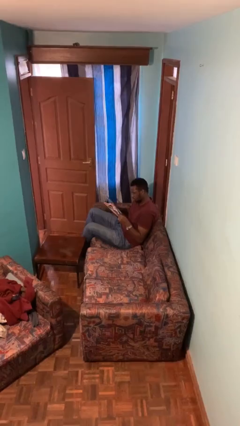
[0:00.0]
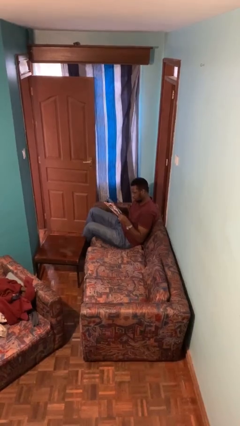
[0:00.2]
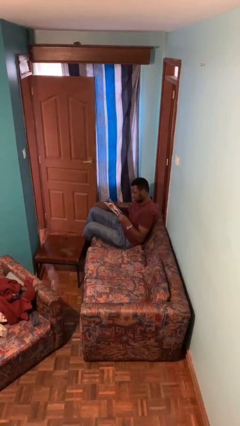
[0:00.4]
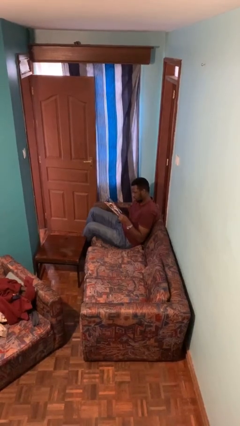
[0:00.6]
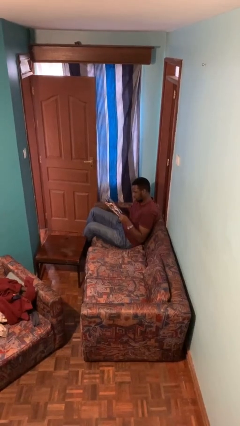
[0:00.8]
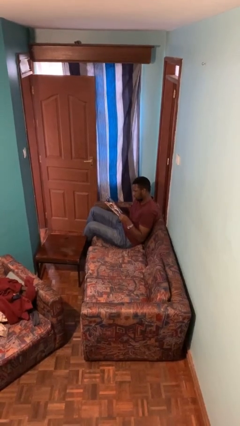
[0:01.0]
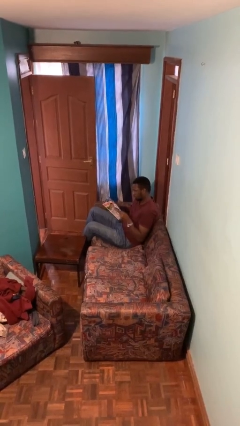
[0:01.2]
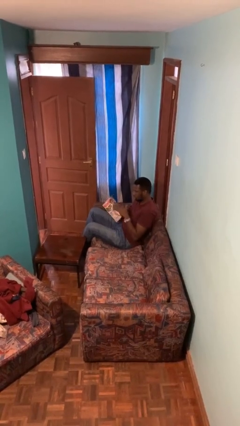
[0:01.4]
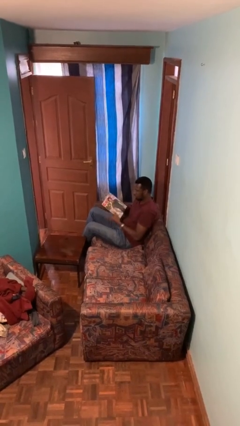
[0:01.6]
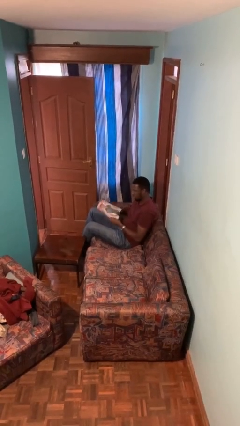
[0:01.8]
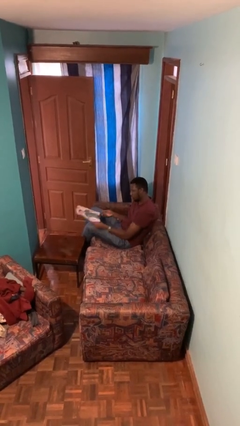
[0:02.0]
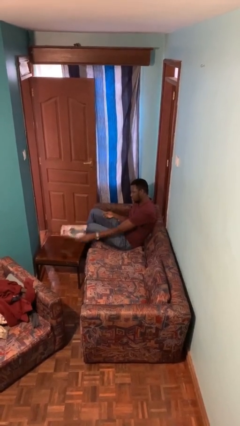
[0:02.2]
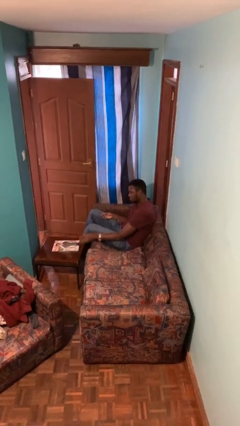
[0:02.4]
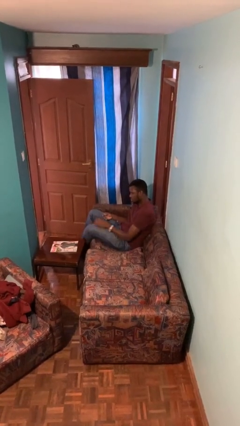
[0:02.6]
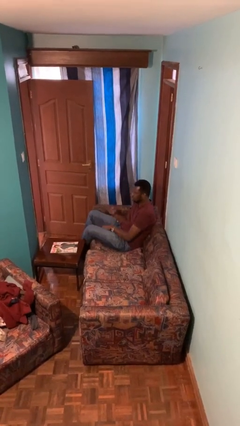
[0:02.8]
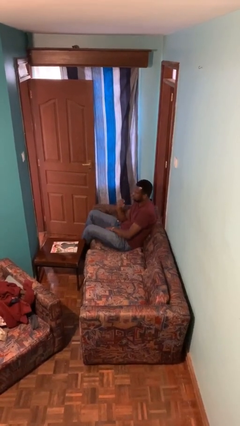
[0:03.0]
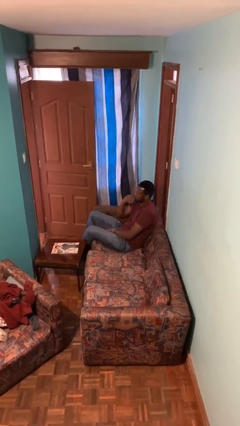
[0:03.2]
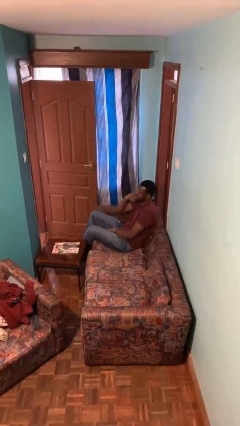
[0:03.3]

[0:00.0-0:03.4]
person puts down object on table

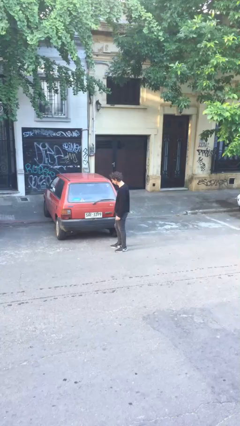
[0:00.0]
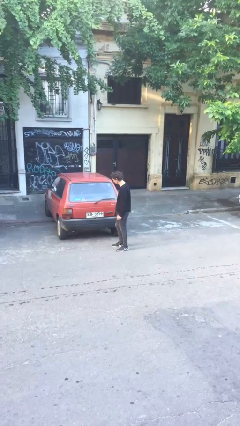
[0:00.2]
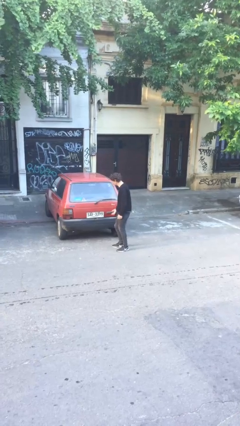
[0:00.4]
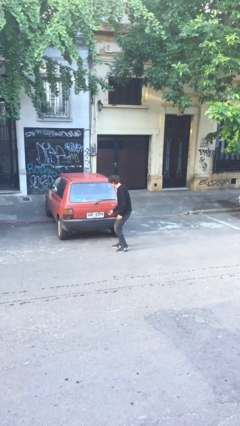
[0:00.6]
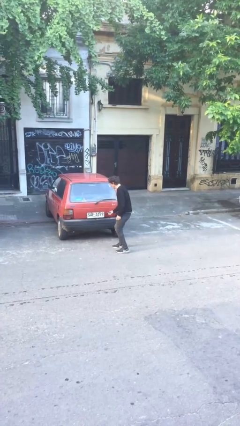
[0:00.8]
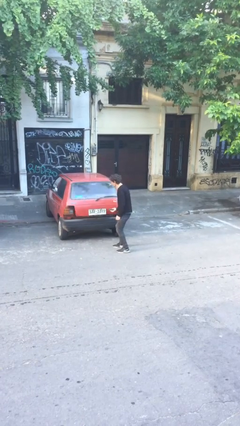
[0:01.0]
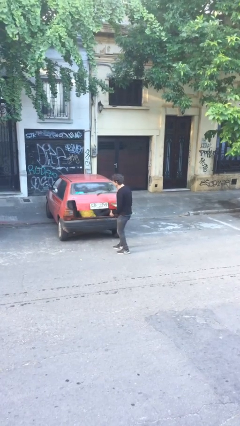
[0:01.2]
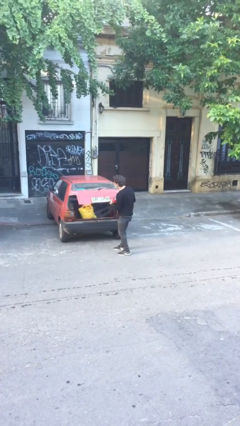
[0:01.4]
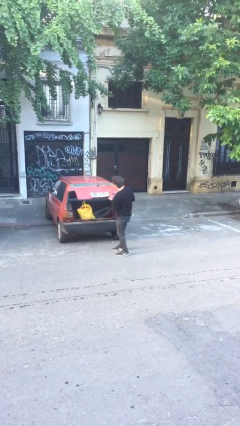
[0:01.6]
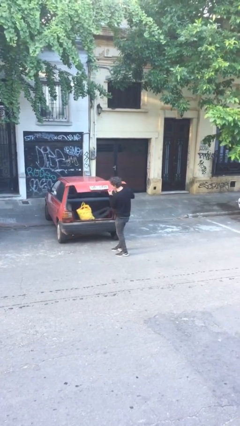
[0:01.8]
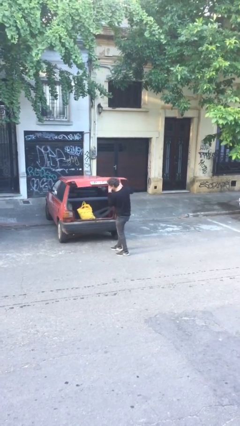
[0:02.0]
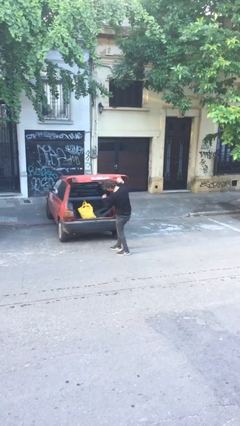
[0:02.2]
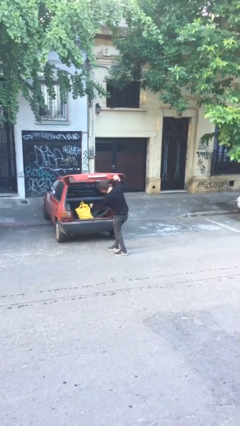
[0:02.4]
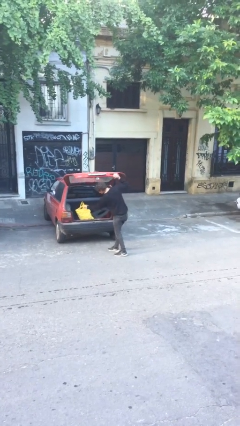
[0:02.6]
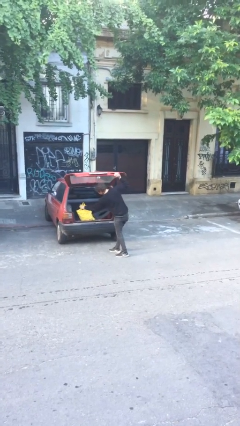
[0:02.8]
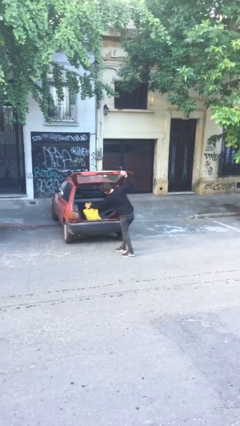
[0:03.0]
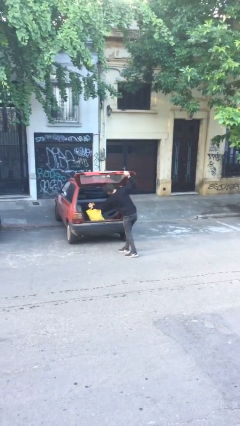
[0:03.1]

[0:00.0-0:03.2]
person opens car trunk

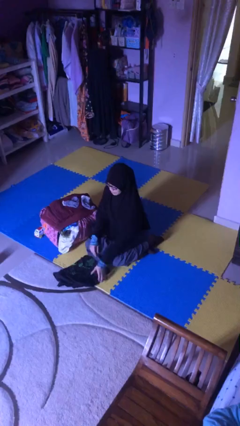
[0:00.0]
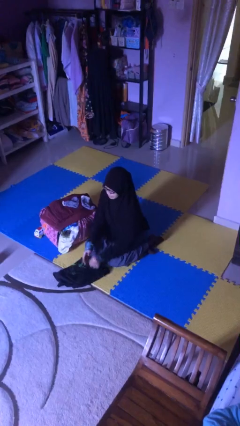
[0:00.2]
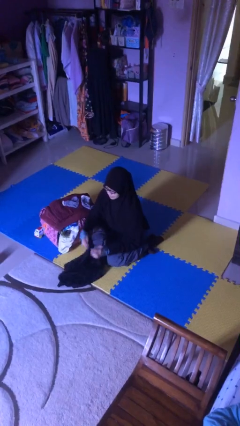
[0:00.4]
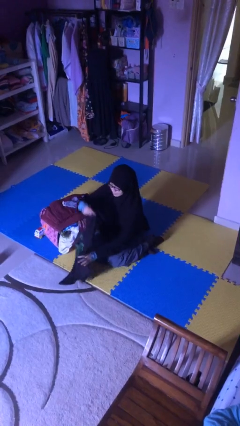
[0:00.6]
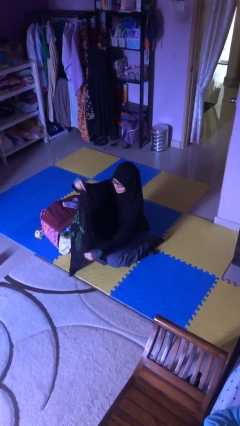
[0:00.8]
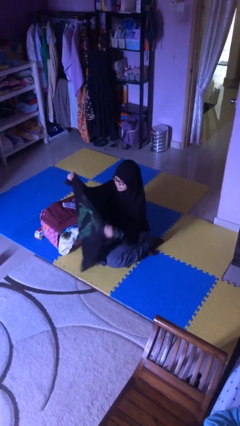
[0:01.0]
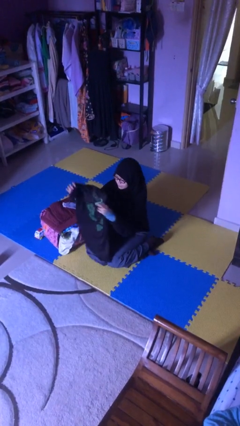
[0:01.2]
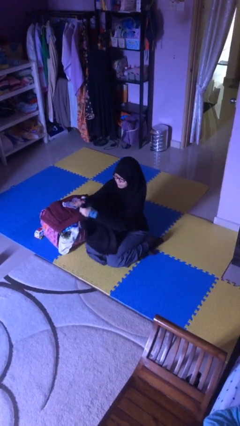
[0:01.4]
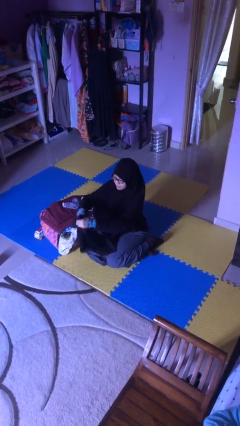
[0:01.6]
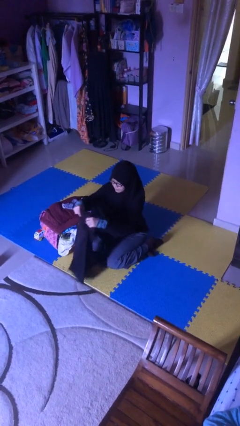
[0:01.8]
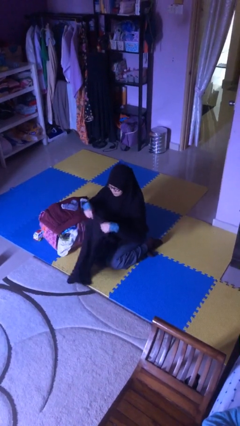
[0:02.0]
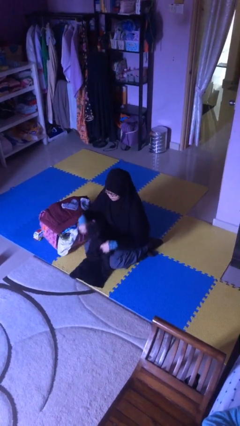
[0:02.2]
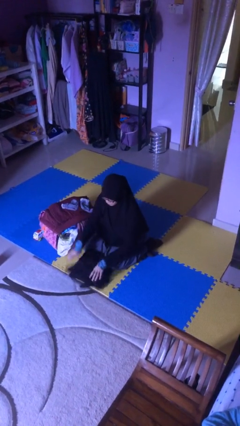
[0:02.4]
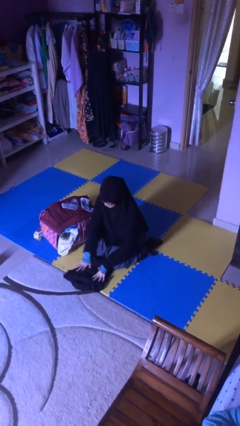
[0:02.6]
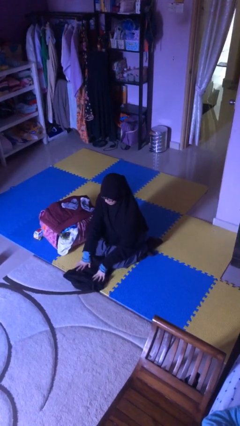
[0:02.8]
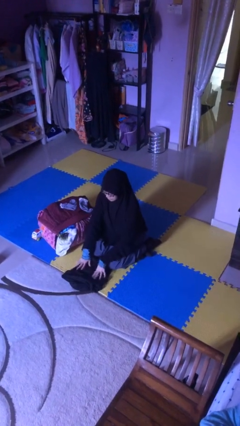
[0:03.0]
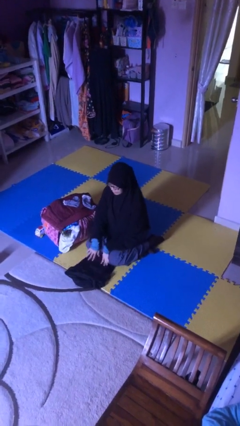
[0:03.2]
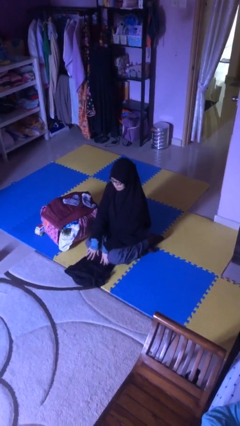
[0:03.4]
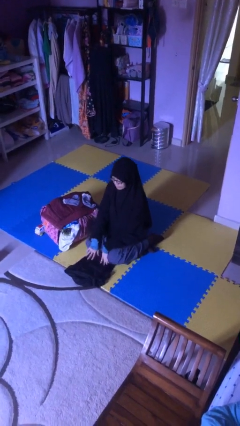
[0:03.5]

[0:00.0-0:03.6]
person folds shirt

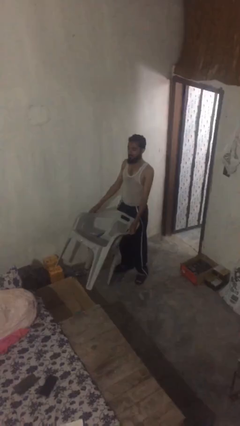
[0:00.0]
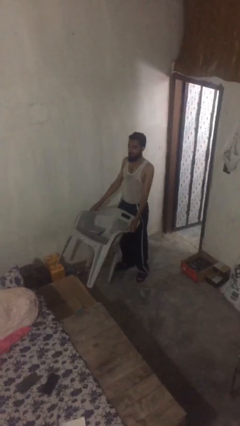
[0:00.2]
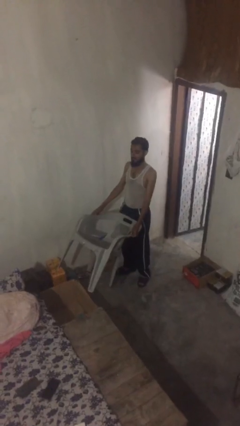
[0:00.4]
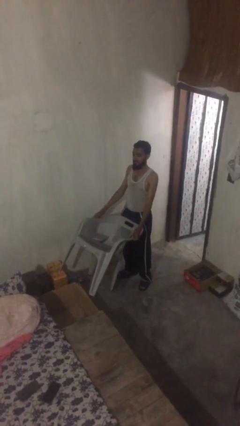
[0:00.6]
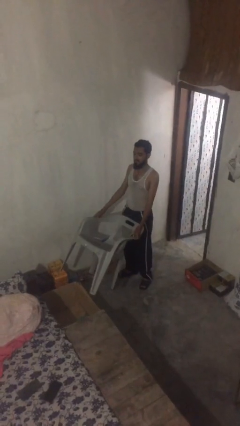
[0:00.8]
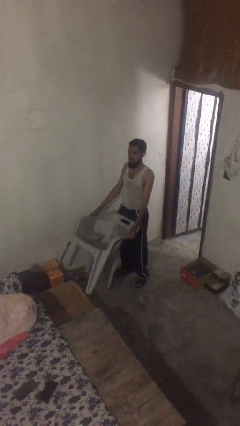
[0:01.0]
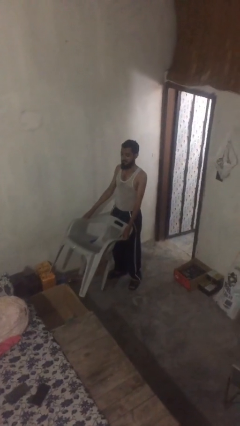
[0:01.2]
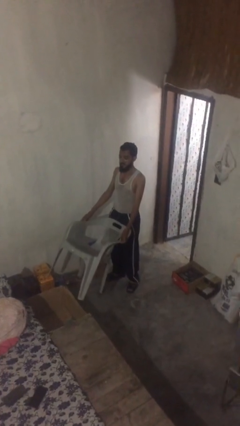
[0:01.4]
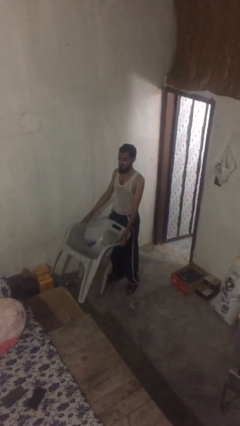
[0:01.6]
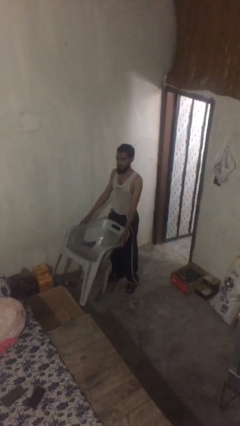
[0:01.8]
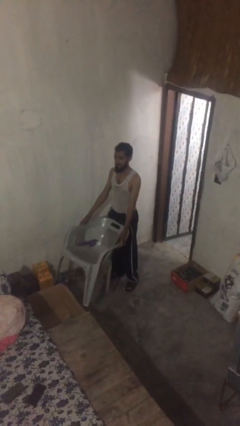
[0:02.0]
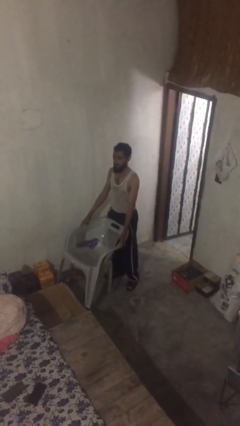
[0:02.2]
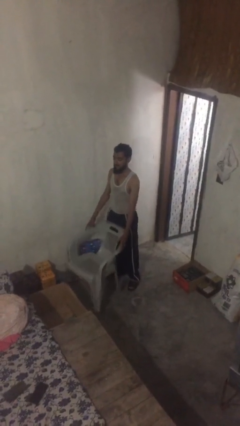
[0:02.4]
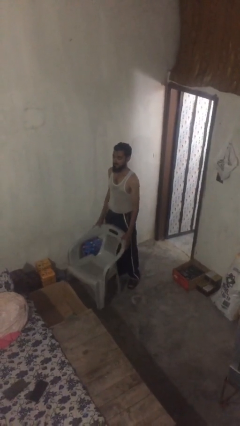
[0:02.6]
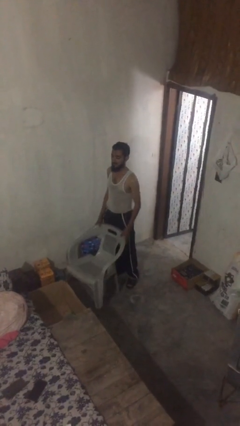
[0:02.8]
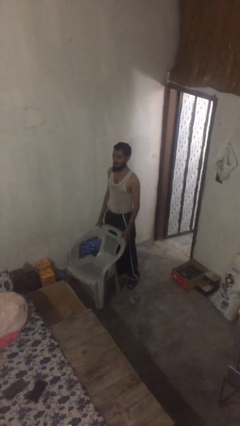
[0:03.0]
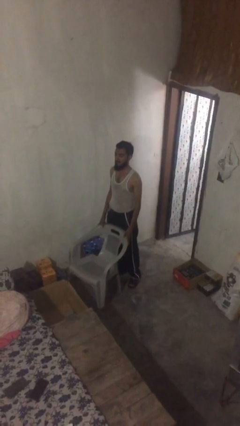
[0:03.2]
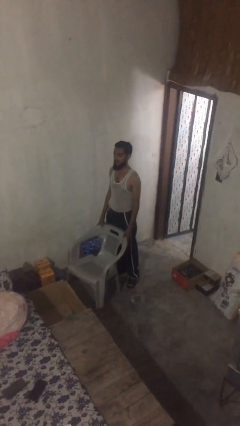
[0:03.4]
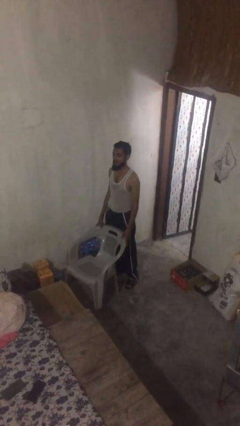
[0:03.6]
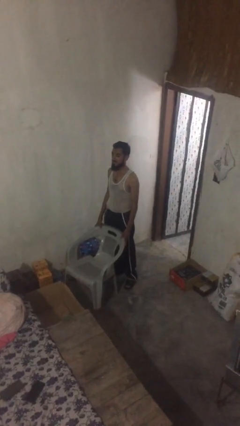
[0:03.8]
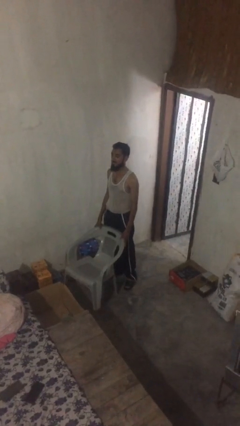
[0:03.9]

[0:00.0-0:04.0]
person puts down object on floor

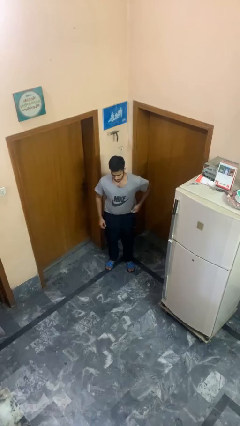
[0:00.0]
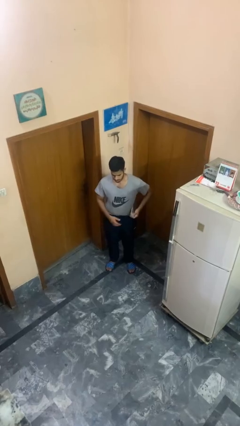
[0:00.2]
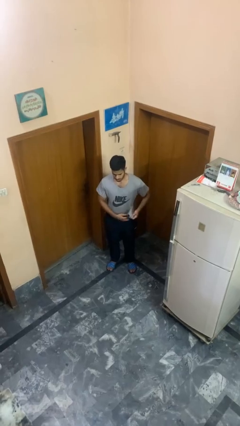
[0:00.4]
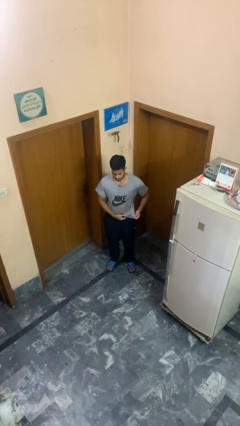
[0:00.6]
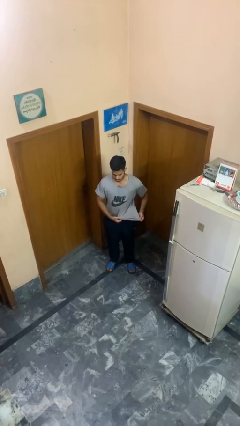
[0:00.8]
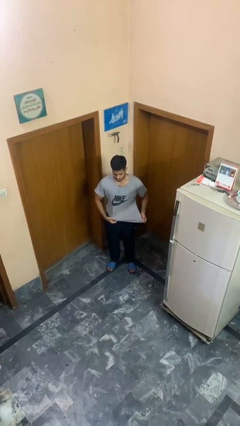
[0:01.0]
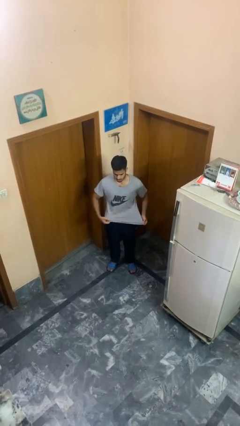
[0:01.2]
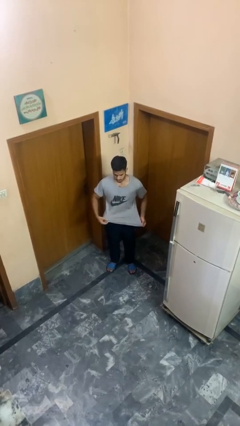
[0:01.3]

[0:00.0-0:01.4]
person untucks shirt

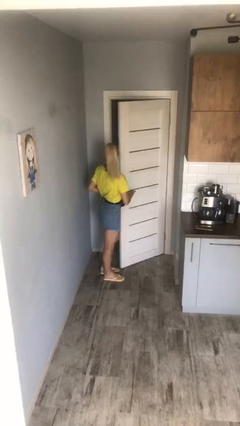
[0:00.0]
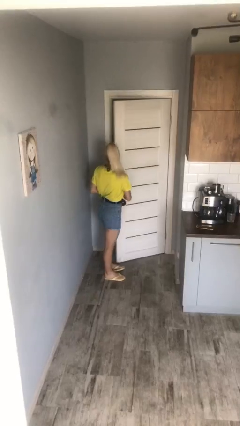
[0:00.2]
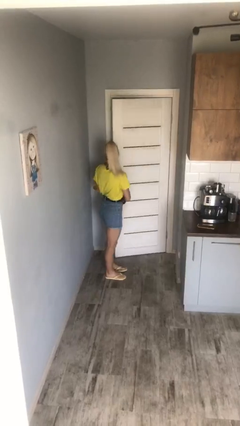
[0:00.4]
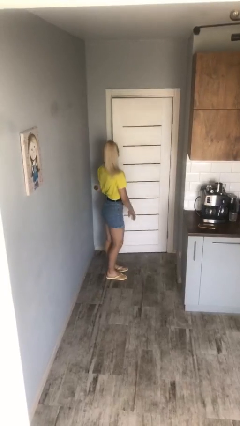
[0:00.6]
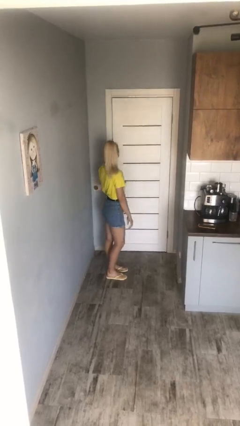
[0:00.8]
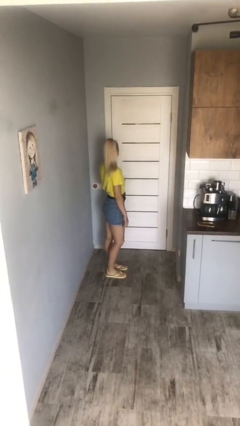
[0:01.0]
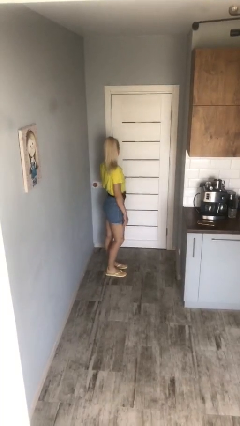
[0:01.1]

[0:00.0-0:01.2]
person closes facility door

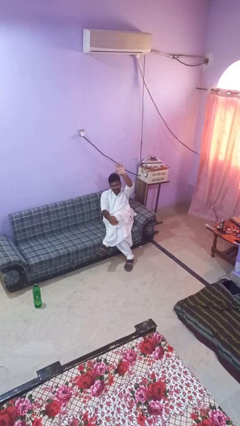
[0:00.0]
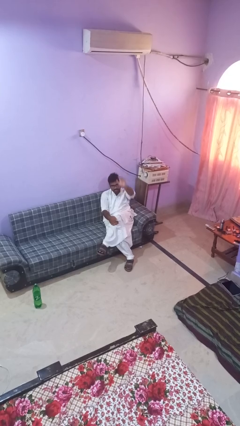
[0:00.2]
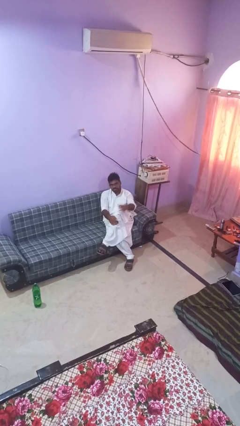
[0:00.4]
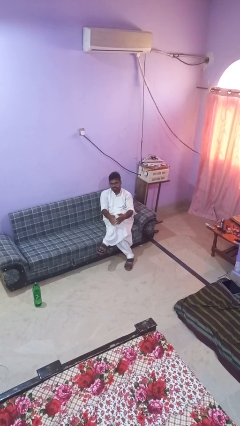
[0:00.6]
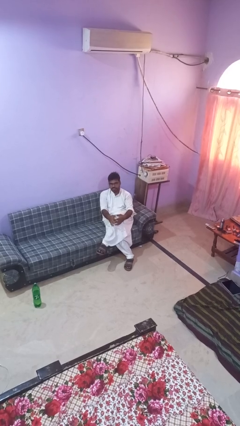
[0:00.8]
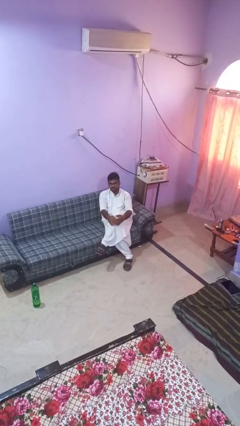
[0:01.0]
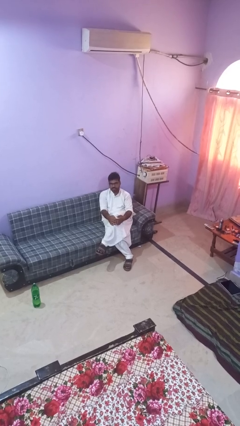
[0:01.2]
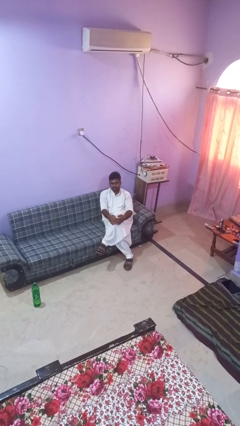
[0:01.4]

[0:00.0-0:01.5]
person gestures lower hand
